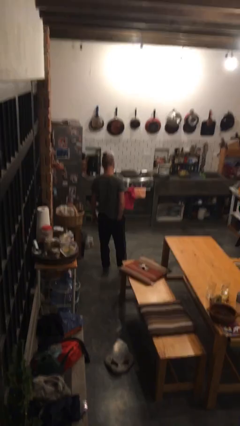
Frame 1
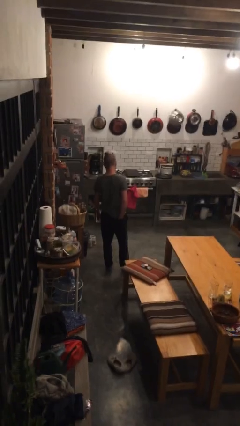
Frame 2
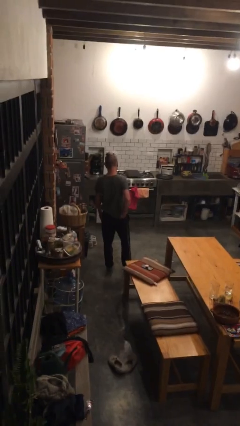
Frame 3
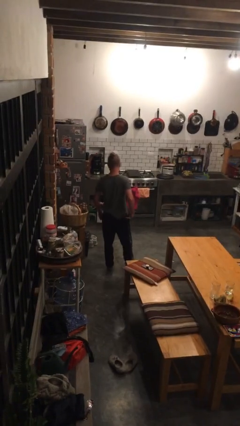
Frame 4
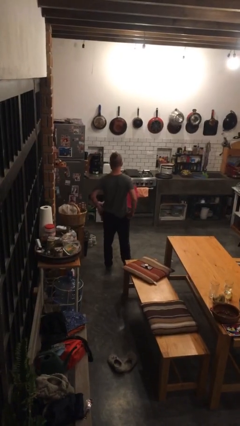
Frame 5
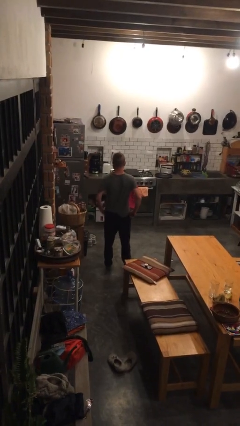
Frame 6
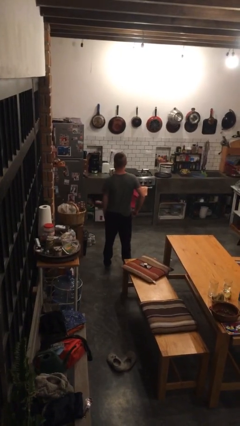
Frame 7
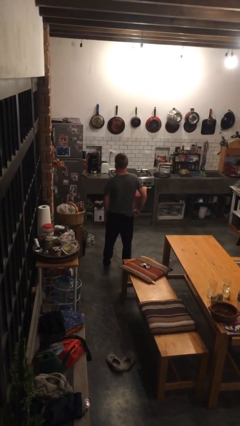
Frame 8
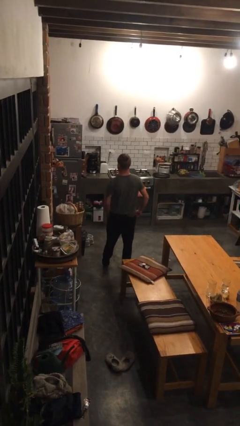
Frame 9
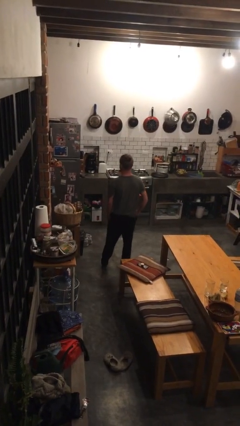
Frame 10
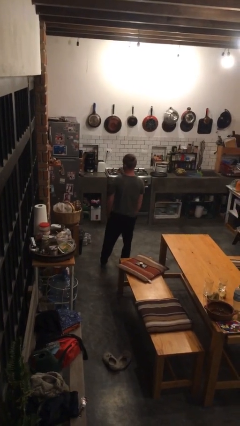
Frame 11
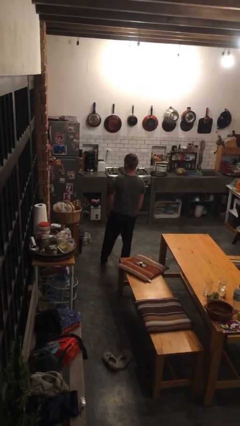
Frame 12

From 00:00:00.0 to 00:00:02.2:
person puts hands in back pockets

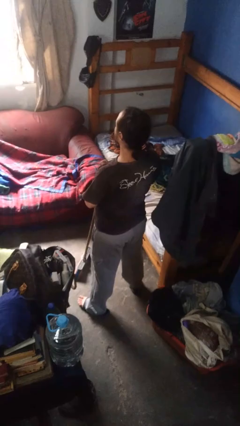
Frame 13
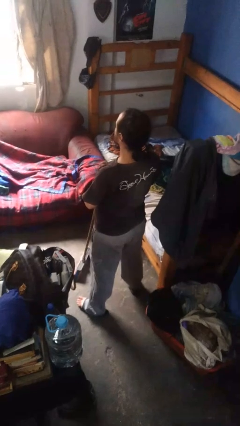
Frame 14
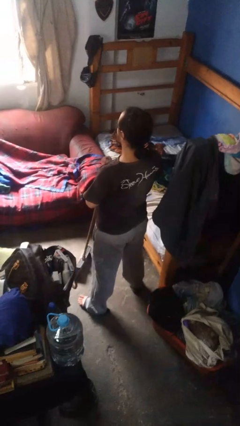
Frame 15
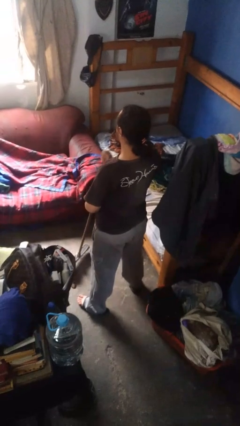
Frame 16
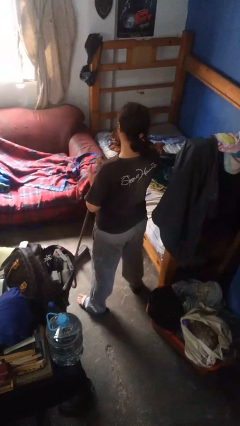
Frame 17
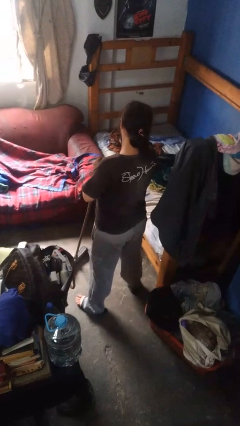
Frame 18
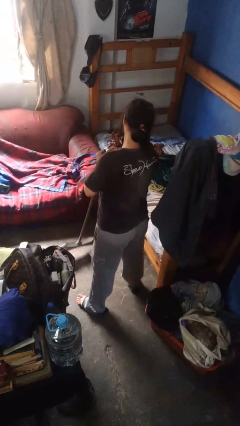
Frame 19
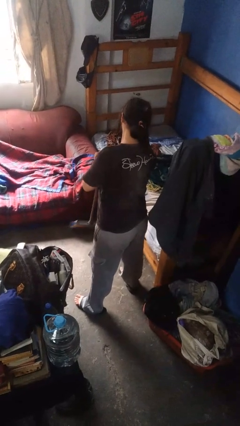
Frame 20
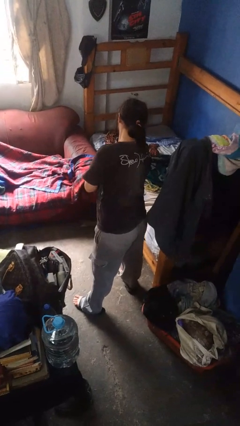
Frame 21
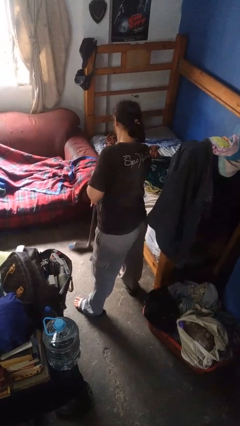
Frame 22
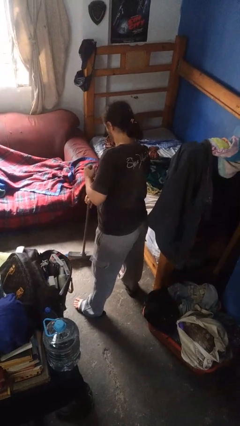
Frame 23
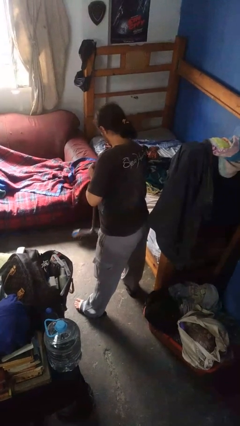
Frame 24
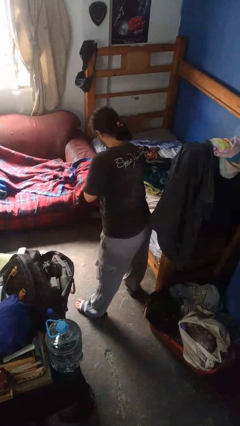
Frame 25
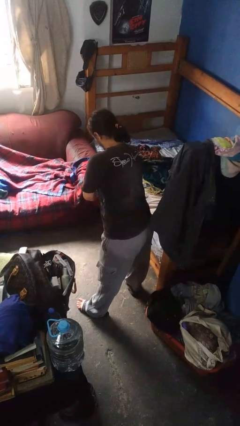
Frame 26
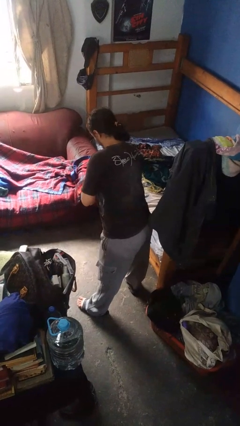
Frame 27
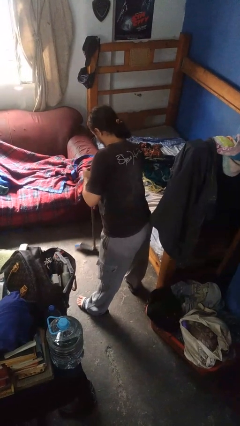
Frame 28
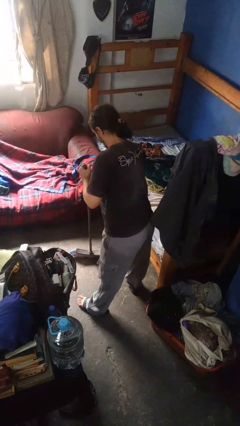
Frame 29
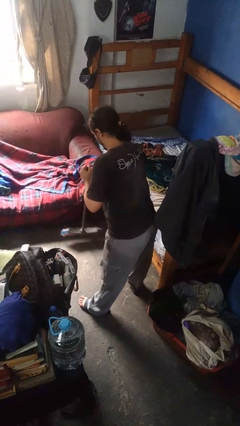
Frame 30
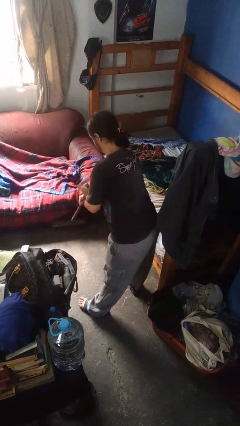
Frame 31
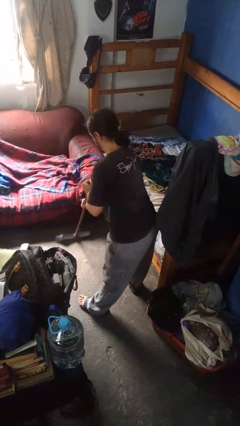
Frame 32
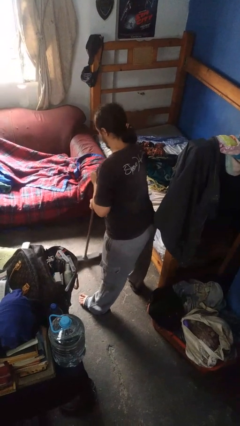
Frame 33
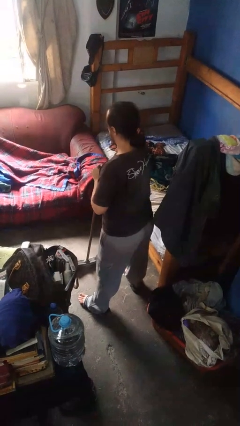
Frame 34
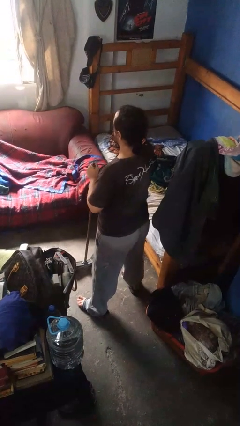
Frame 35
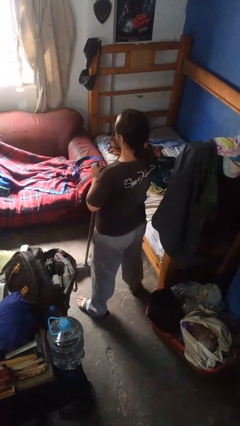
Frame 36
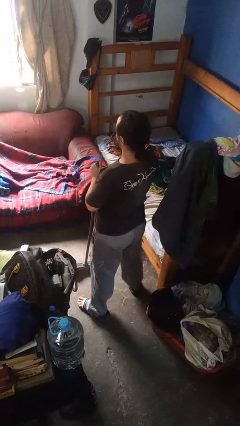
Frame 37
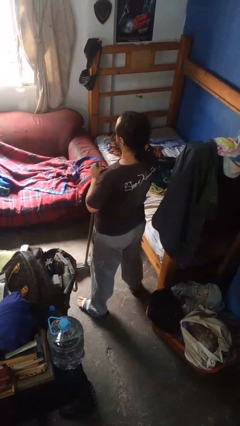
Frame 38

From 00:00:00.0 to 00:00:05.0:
person sweeps floor

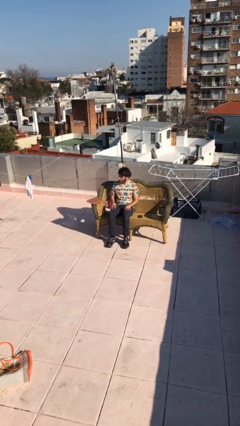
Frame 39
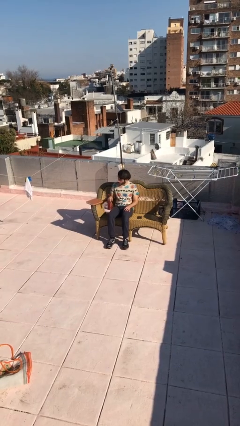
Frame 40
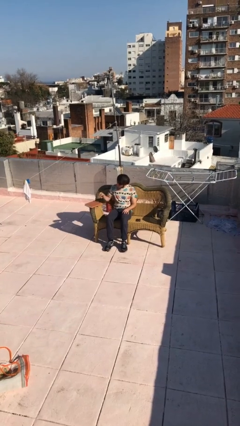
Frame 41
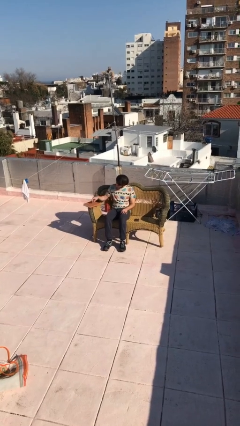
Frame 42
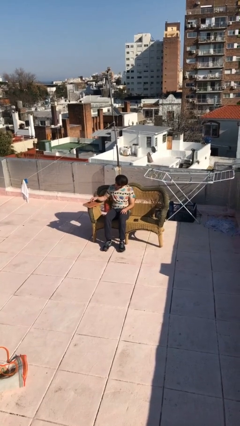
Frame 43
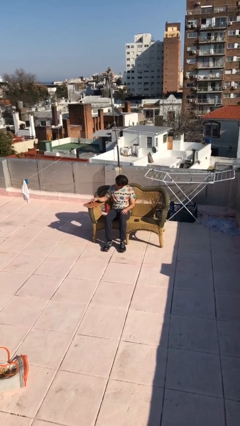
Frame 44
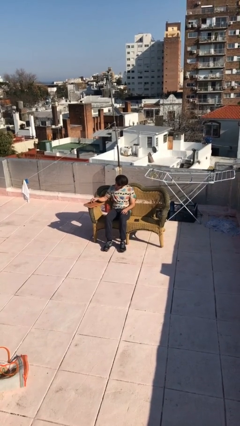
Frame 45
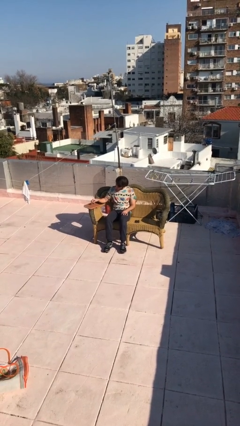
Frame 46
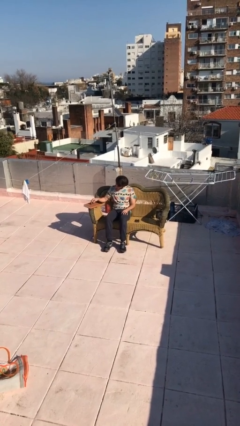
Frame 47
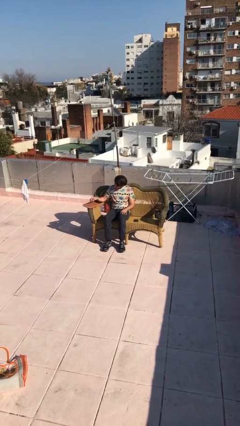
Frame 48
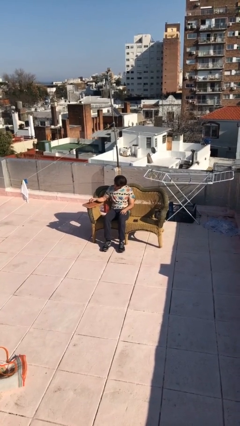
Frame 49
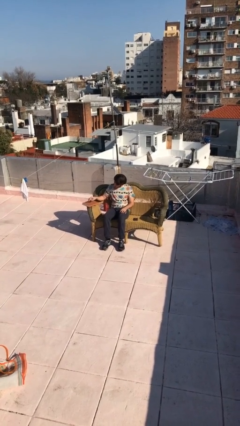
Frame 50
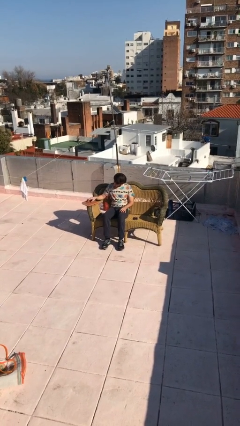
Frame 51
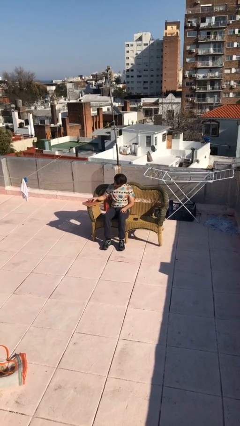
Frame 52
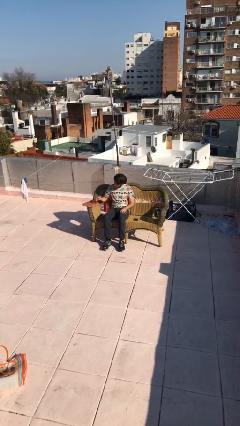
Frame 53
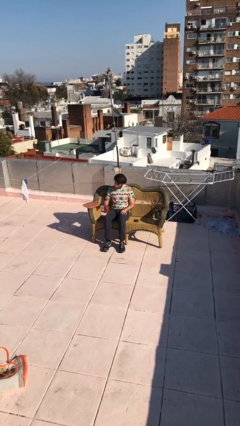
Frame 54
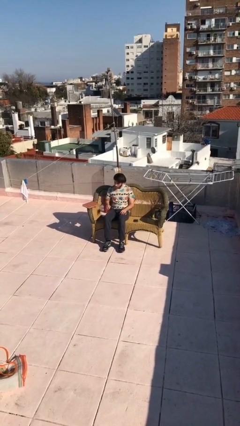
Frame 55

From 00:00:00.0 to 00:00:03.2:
person taps object with finger

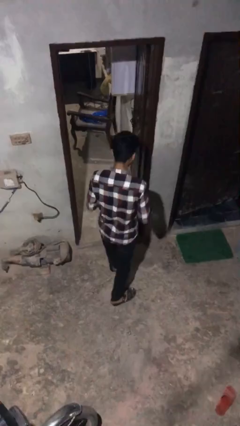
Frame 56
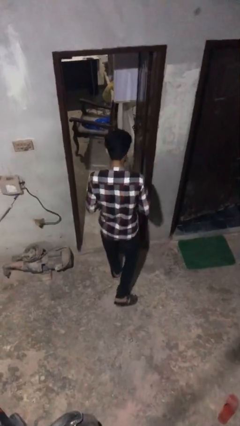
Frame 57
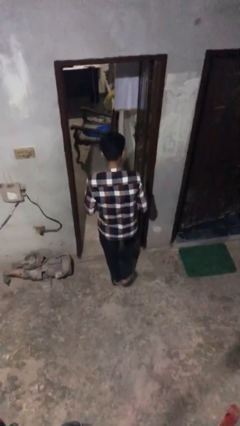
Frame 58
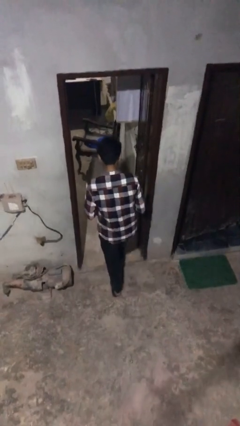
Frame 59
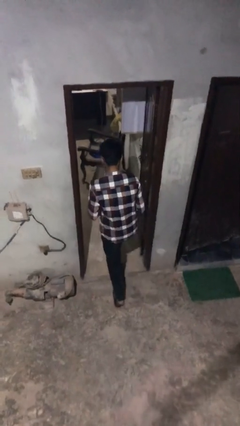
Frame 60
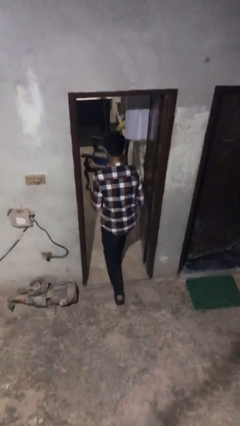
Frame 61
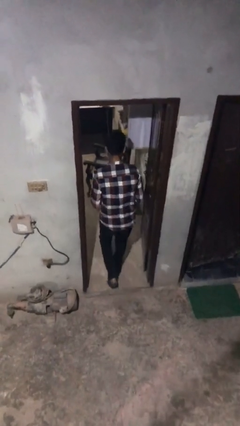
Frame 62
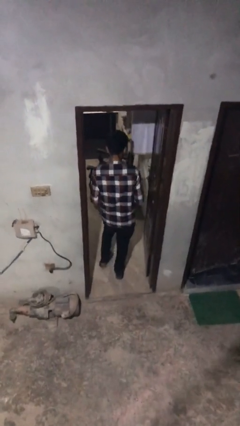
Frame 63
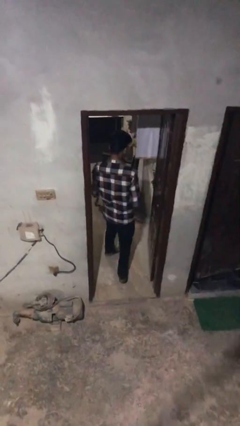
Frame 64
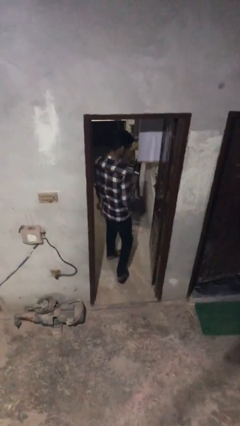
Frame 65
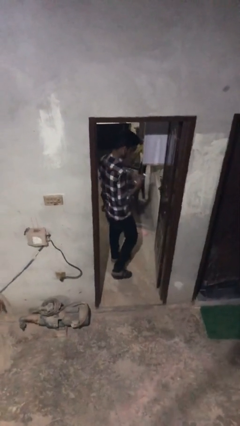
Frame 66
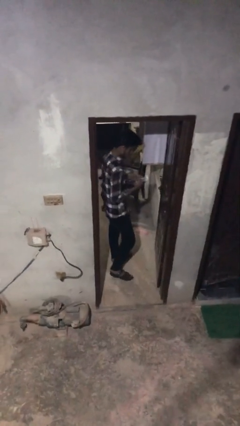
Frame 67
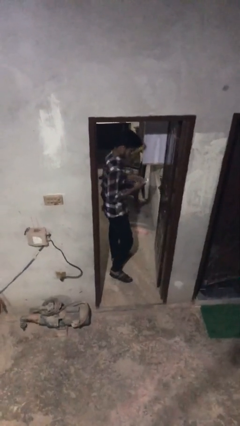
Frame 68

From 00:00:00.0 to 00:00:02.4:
person exits scene through structure

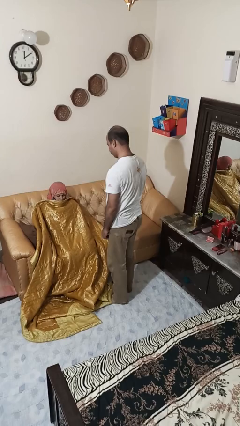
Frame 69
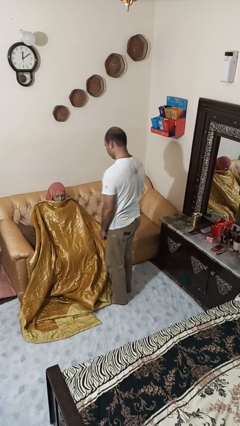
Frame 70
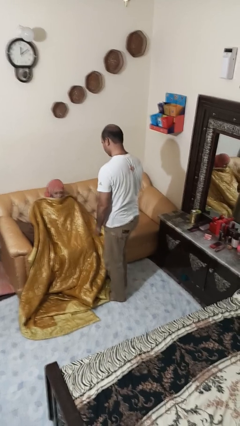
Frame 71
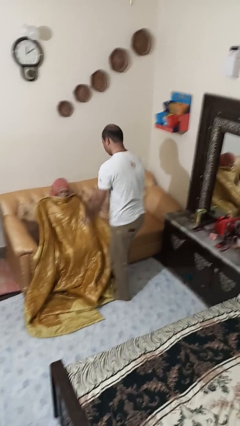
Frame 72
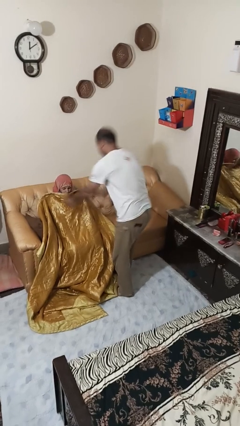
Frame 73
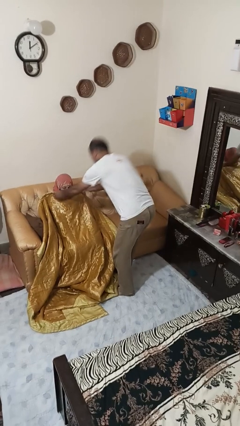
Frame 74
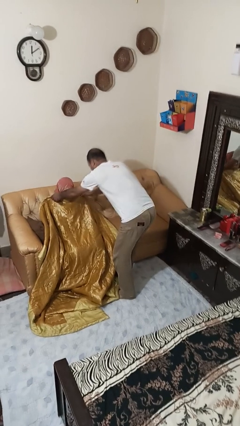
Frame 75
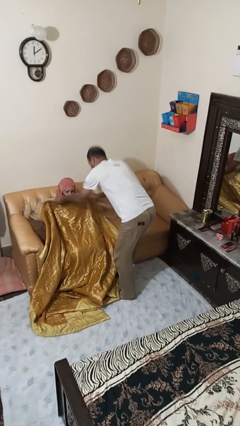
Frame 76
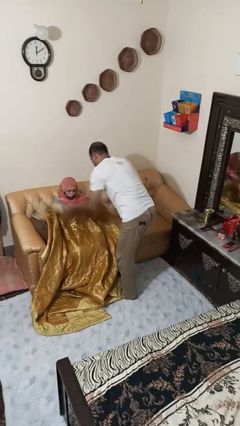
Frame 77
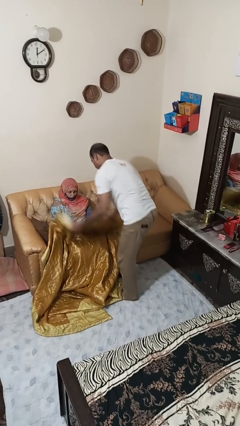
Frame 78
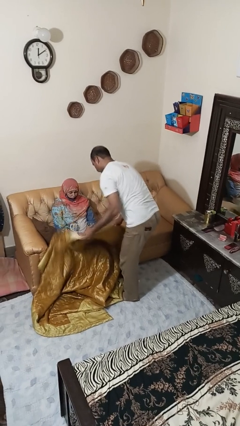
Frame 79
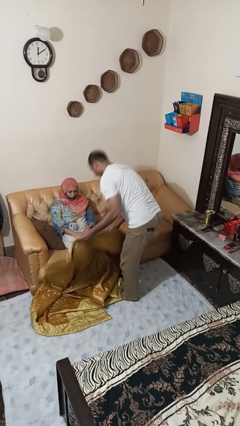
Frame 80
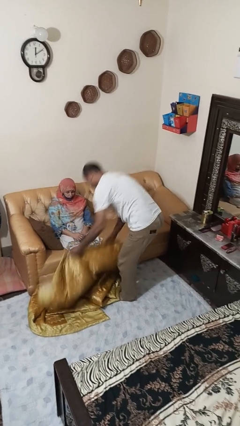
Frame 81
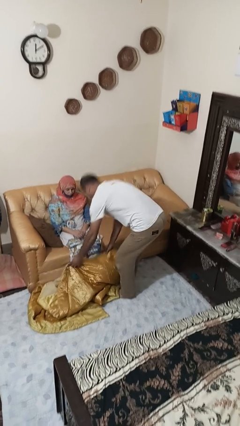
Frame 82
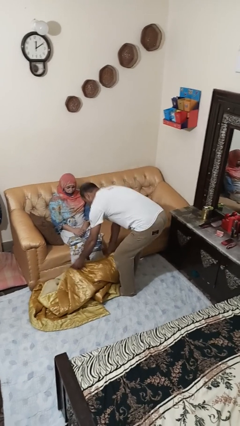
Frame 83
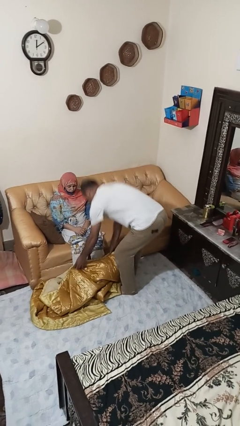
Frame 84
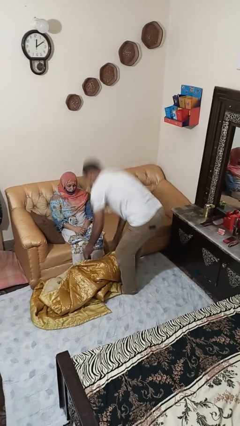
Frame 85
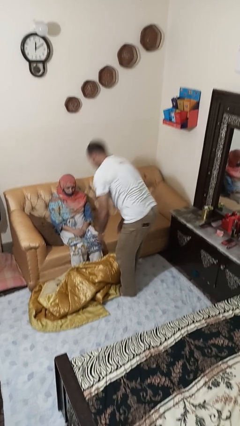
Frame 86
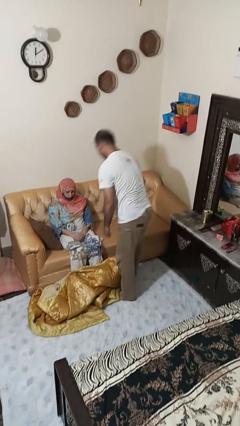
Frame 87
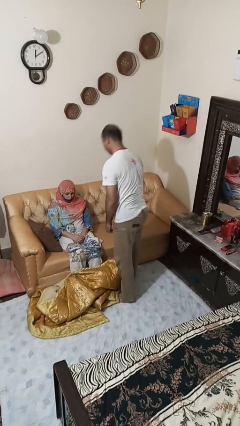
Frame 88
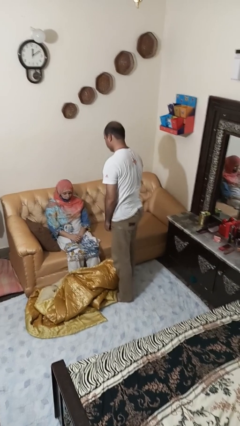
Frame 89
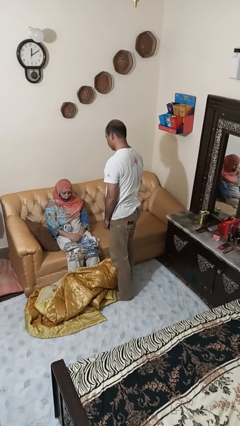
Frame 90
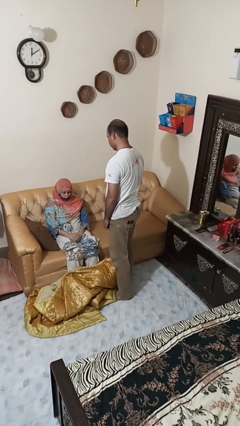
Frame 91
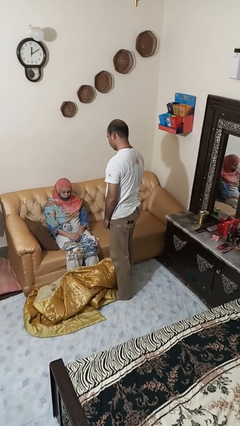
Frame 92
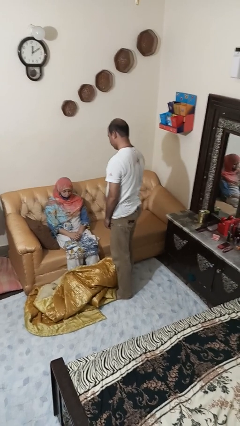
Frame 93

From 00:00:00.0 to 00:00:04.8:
person uncovers friend with blanket
